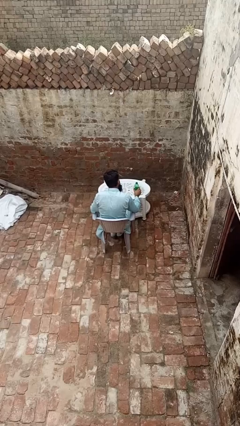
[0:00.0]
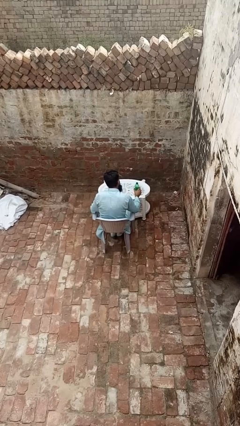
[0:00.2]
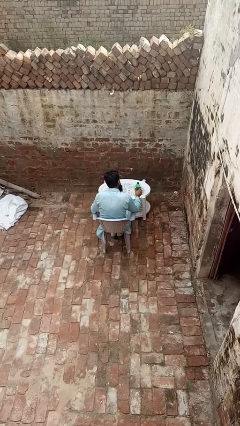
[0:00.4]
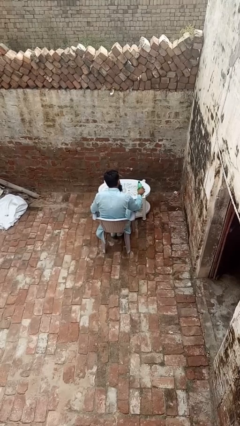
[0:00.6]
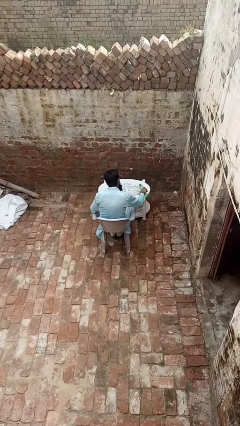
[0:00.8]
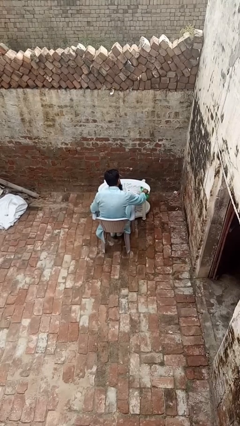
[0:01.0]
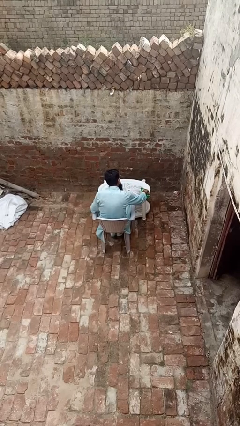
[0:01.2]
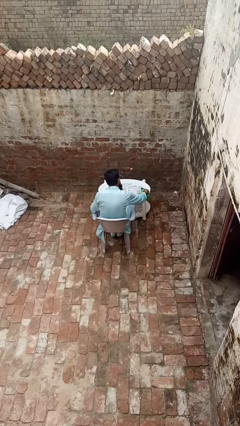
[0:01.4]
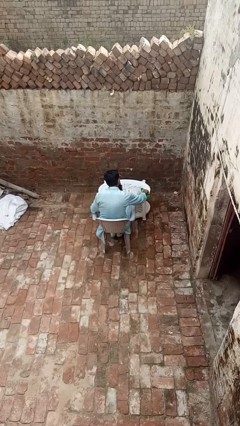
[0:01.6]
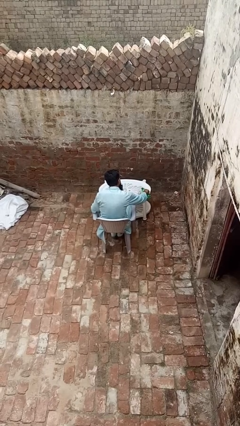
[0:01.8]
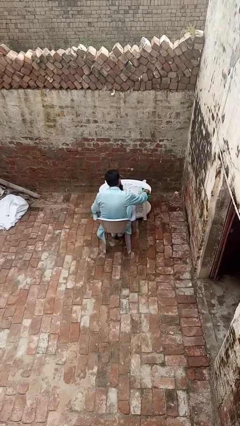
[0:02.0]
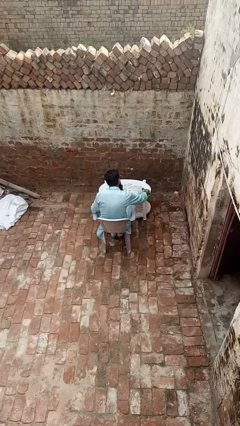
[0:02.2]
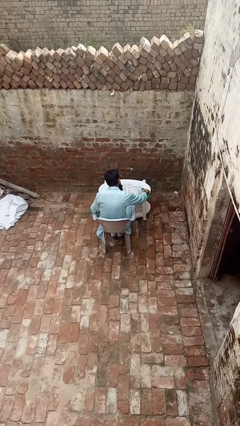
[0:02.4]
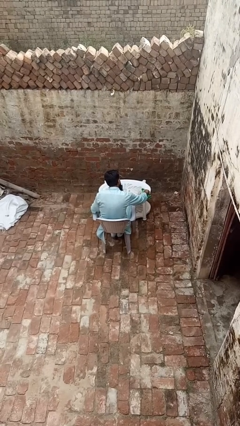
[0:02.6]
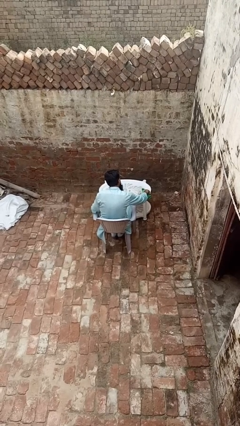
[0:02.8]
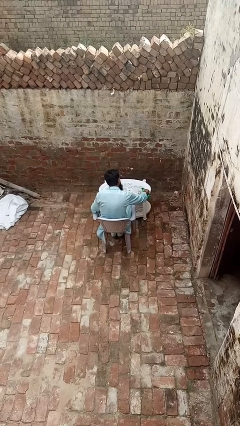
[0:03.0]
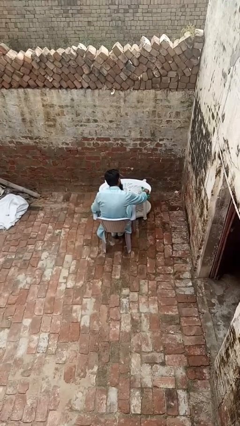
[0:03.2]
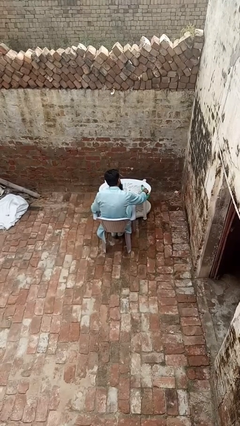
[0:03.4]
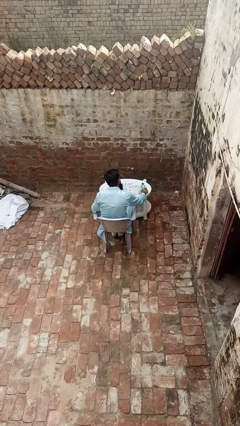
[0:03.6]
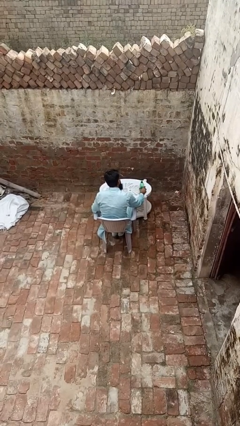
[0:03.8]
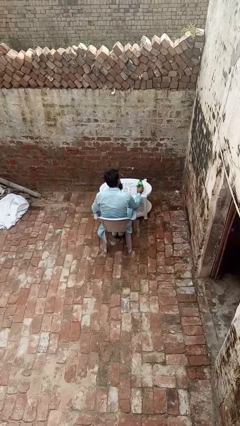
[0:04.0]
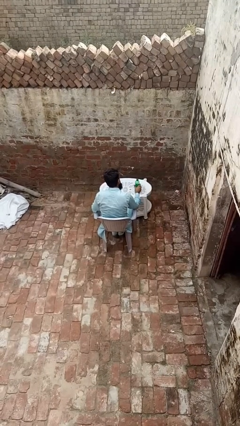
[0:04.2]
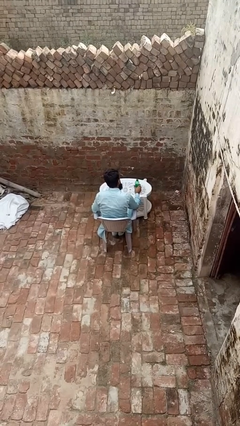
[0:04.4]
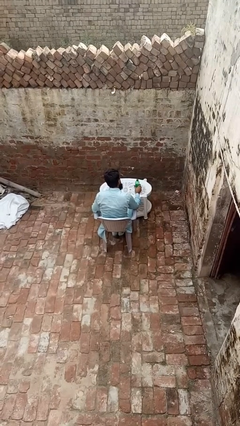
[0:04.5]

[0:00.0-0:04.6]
person pours liquid into cup

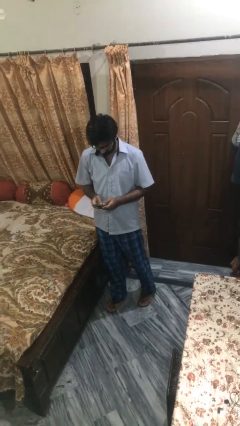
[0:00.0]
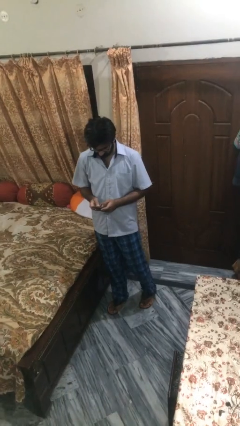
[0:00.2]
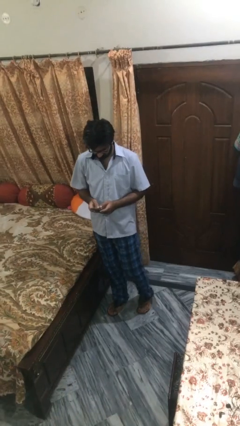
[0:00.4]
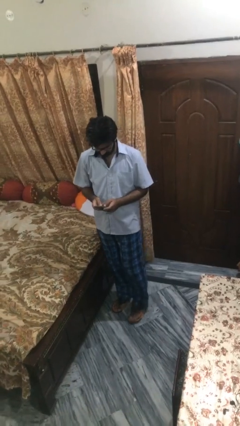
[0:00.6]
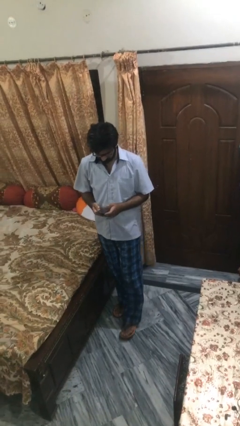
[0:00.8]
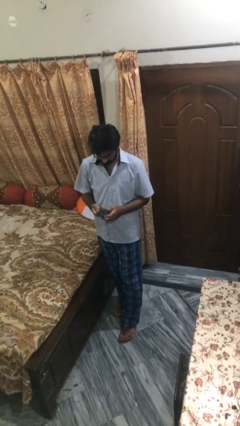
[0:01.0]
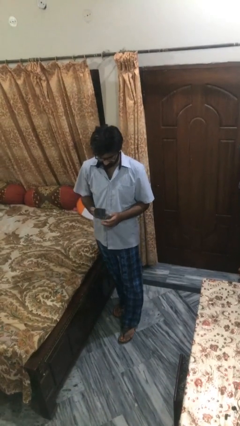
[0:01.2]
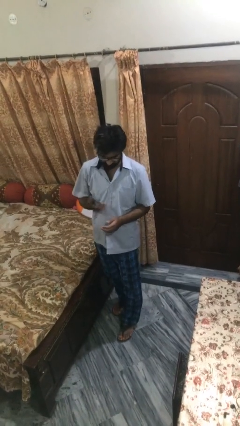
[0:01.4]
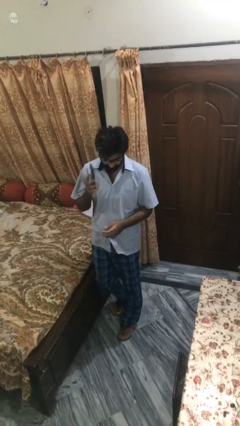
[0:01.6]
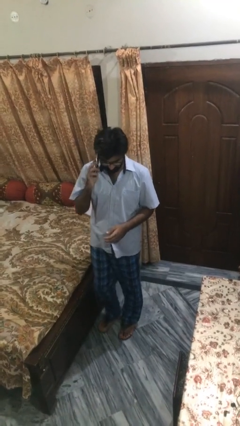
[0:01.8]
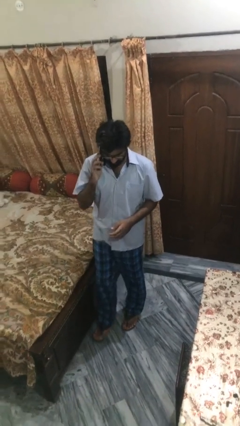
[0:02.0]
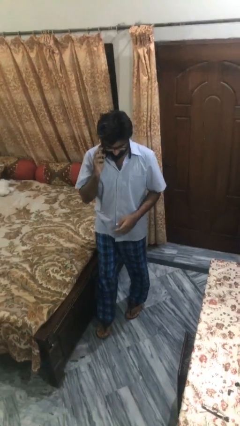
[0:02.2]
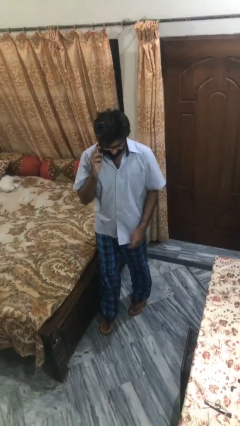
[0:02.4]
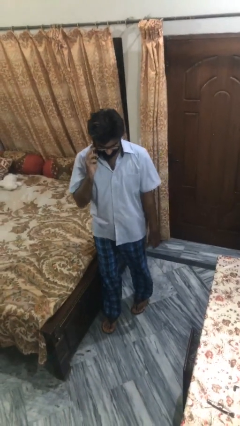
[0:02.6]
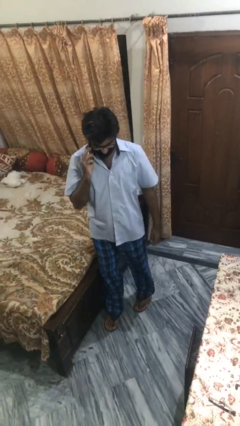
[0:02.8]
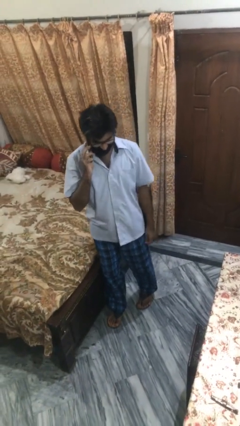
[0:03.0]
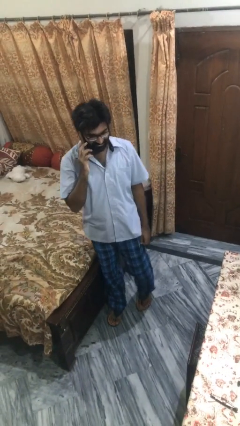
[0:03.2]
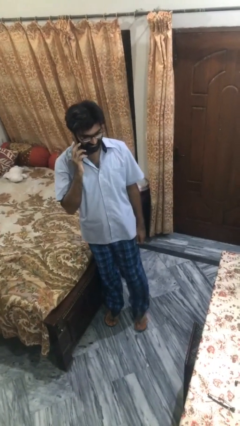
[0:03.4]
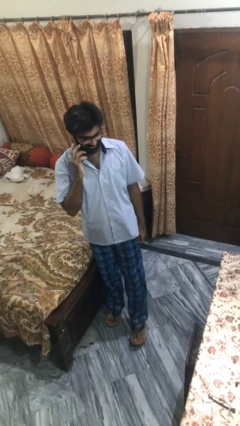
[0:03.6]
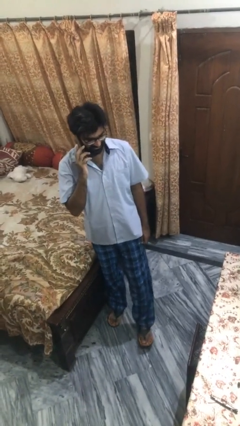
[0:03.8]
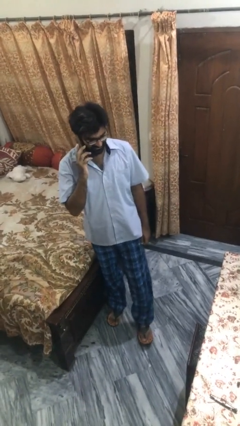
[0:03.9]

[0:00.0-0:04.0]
person talks on phone

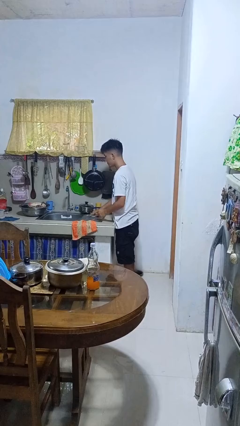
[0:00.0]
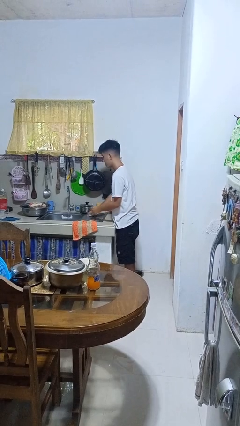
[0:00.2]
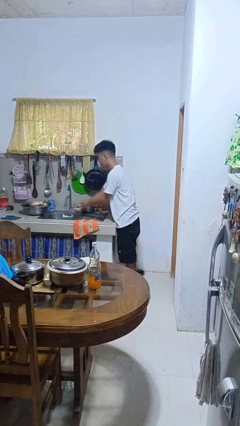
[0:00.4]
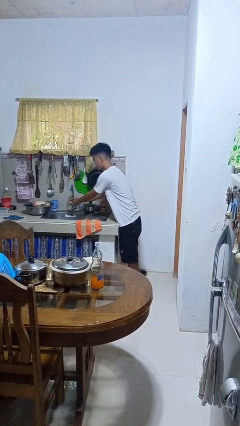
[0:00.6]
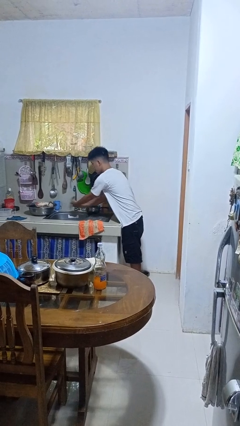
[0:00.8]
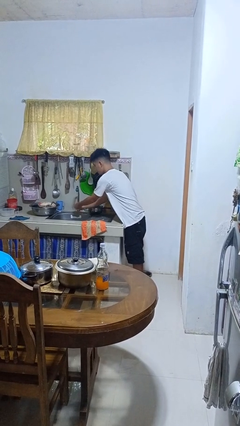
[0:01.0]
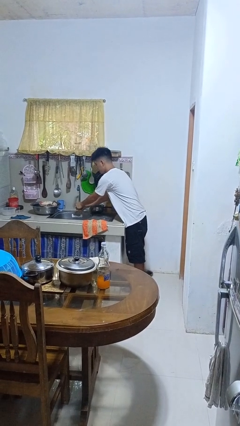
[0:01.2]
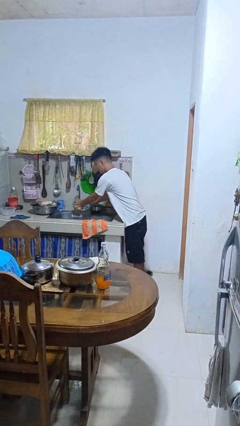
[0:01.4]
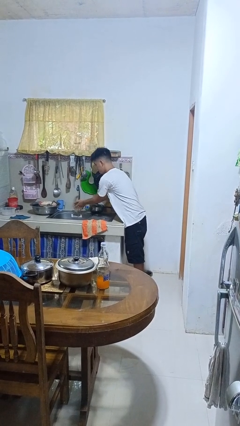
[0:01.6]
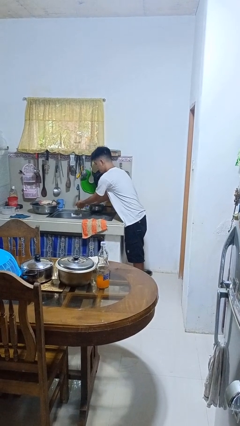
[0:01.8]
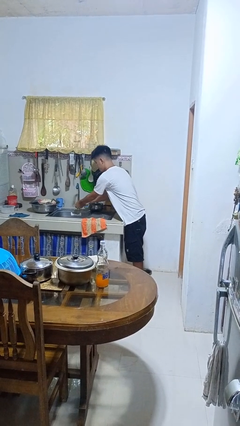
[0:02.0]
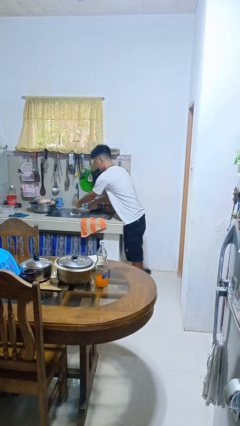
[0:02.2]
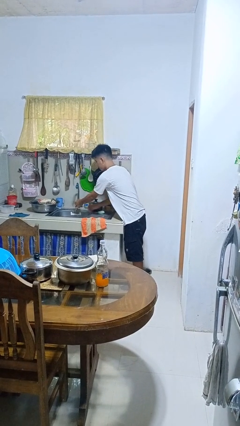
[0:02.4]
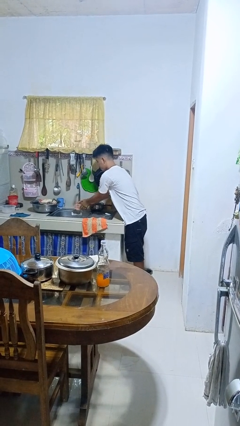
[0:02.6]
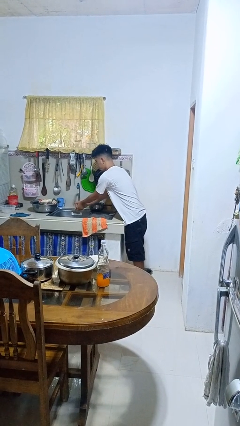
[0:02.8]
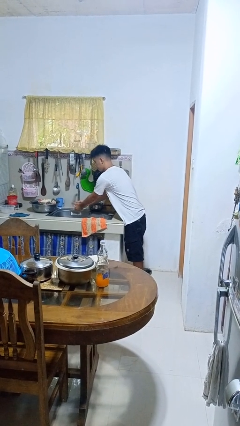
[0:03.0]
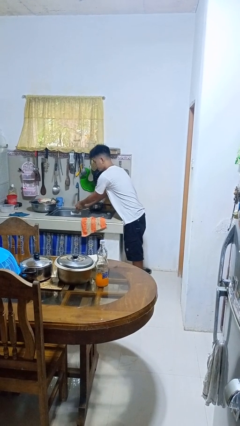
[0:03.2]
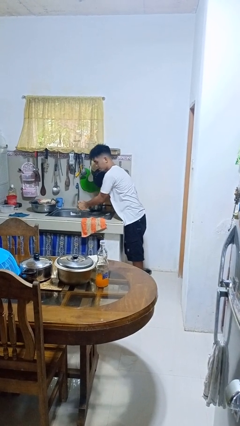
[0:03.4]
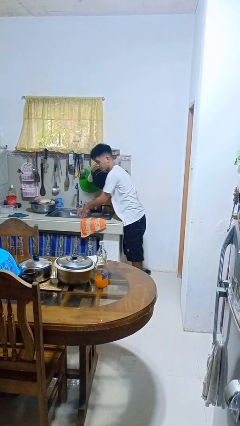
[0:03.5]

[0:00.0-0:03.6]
person washes hands

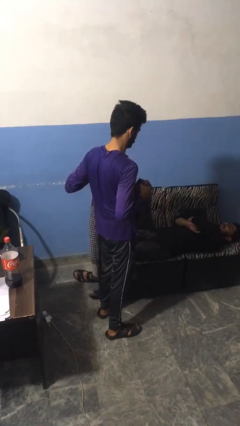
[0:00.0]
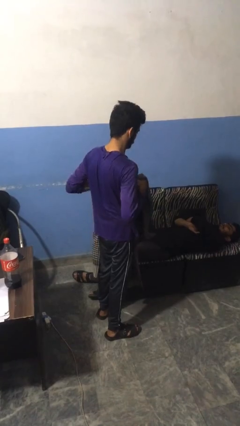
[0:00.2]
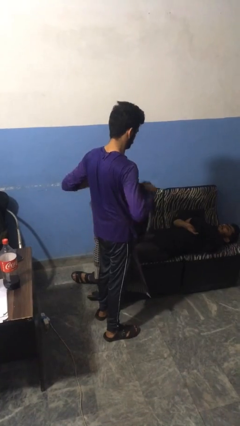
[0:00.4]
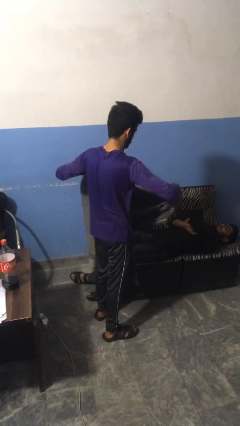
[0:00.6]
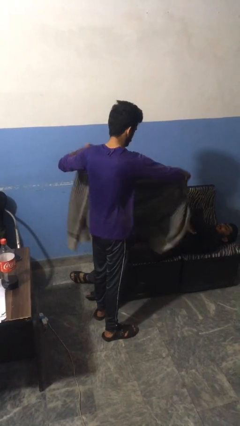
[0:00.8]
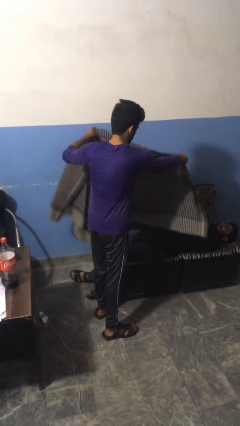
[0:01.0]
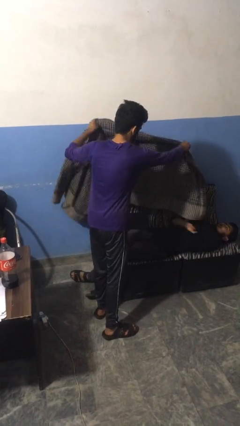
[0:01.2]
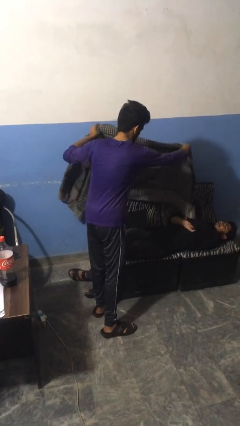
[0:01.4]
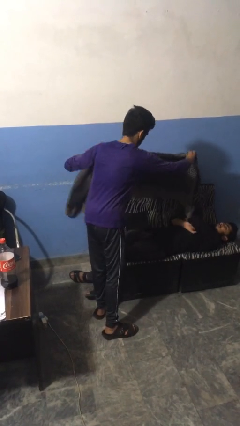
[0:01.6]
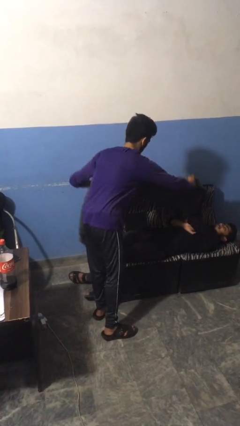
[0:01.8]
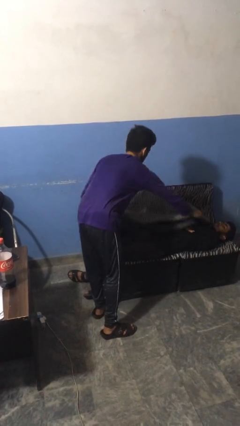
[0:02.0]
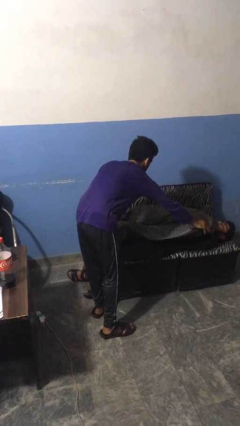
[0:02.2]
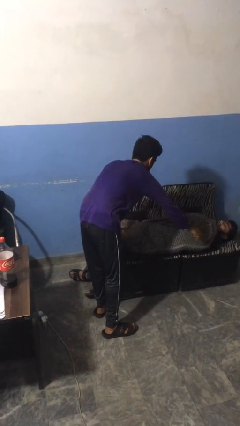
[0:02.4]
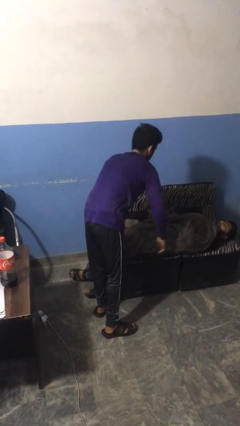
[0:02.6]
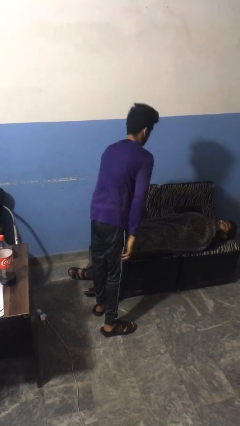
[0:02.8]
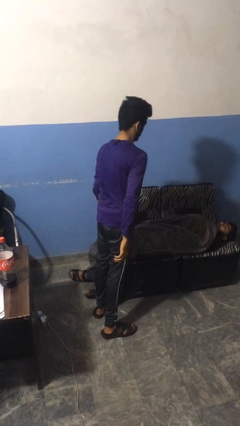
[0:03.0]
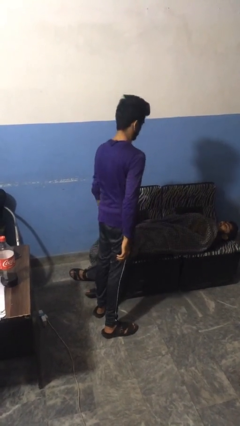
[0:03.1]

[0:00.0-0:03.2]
person covers friend with blanket

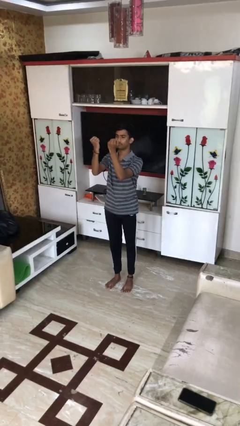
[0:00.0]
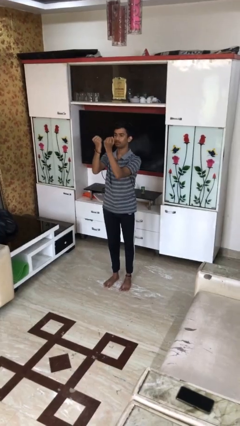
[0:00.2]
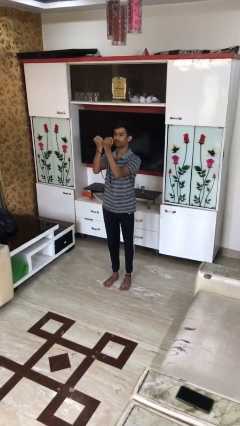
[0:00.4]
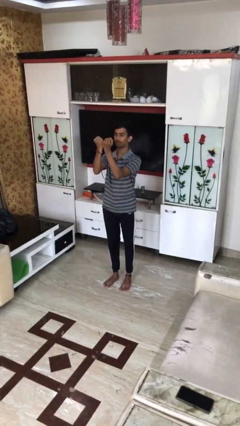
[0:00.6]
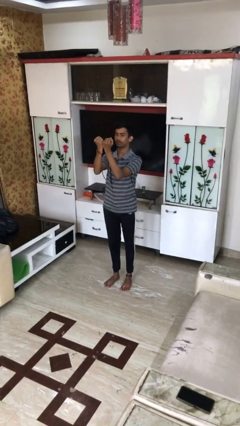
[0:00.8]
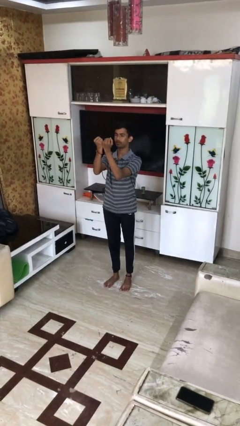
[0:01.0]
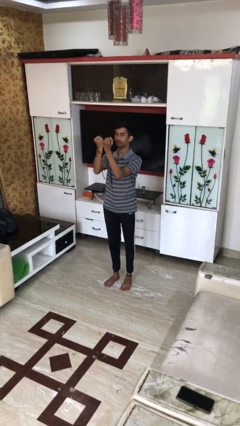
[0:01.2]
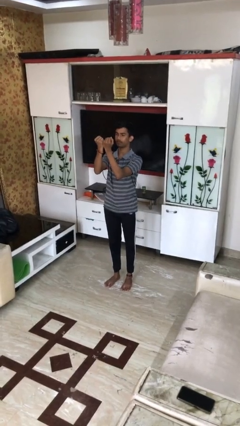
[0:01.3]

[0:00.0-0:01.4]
person gestures zoom out

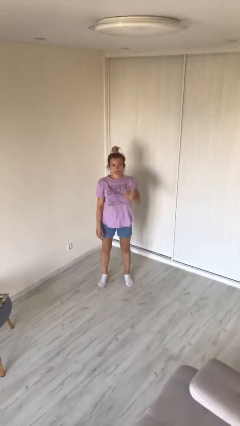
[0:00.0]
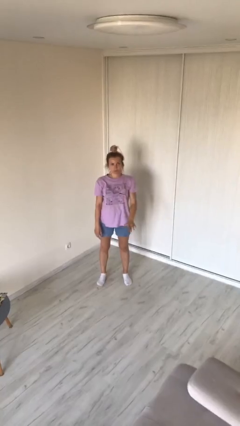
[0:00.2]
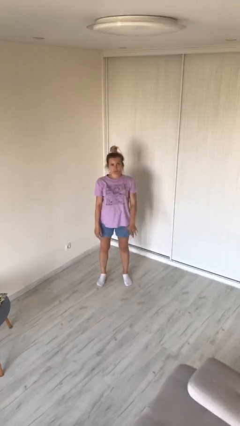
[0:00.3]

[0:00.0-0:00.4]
person gestures swipe down

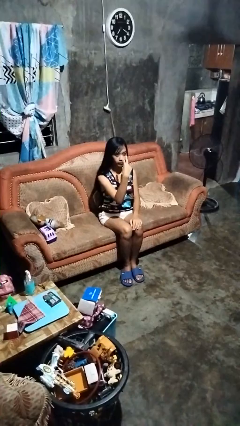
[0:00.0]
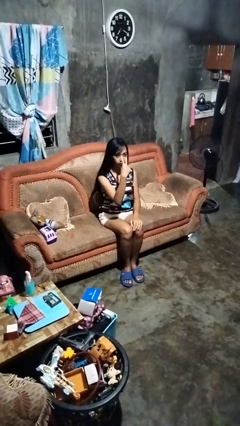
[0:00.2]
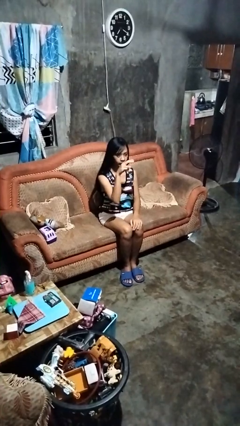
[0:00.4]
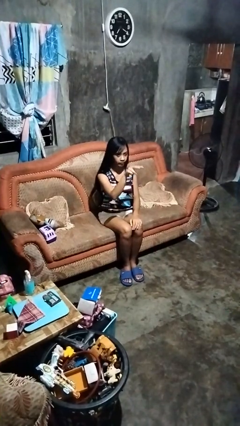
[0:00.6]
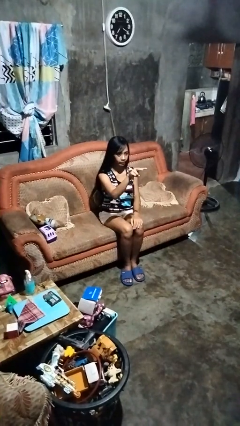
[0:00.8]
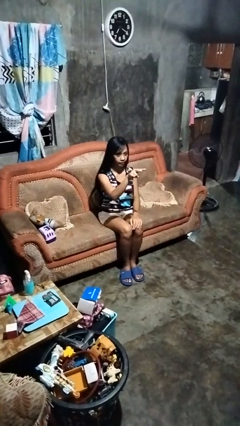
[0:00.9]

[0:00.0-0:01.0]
person gestures watch closely
